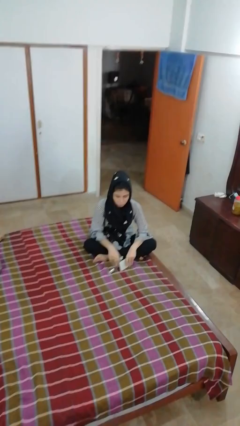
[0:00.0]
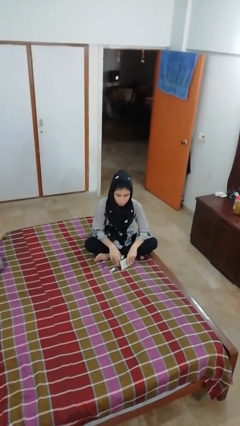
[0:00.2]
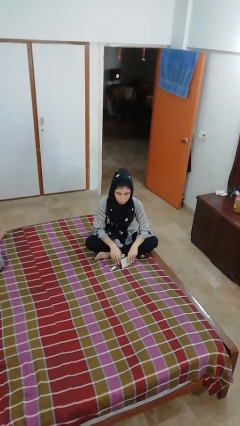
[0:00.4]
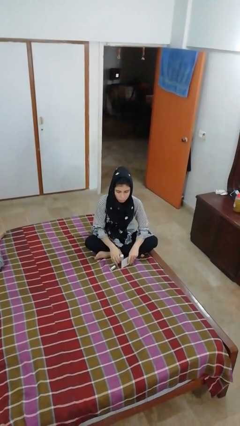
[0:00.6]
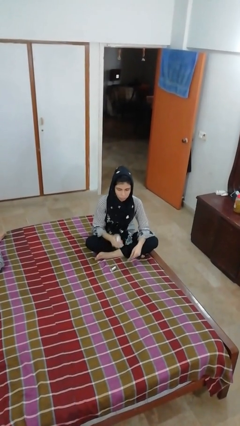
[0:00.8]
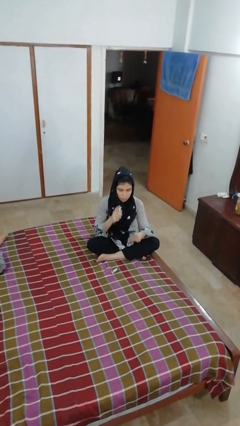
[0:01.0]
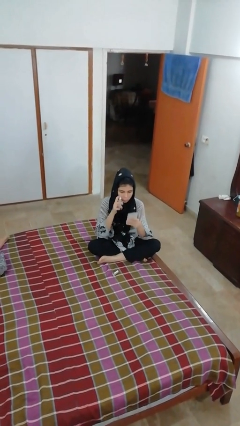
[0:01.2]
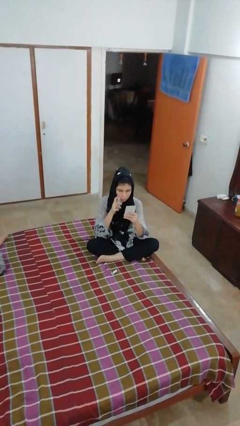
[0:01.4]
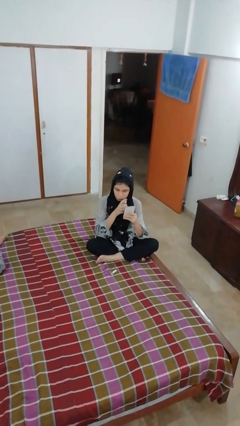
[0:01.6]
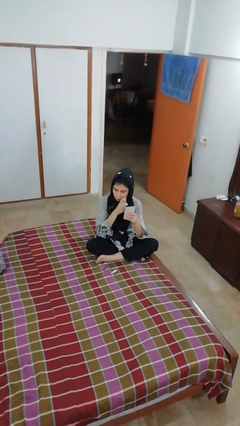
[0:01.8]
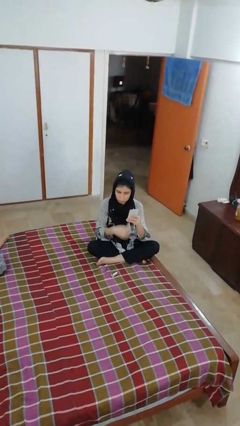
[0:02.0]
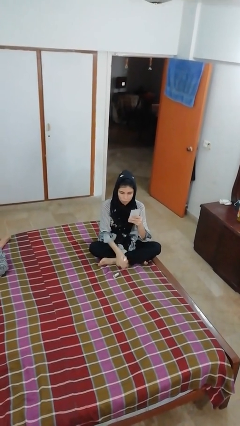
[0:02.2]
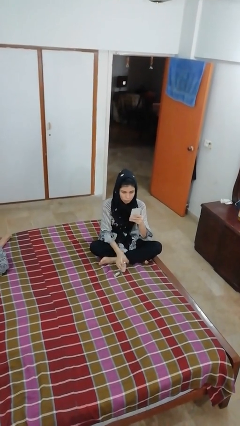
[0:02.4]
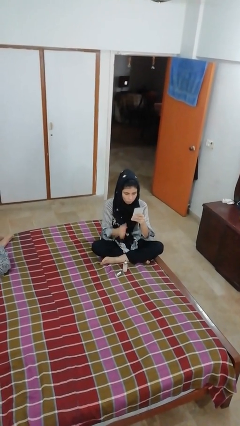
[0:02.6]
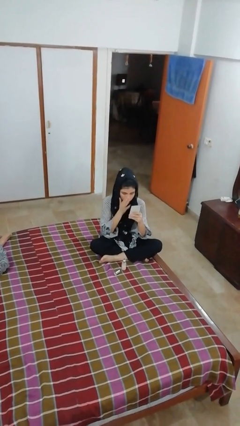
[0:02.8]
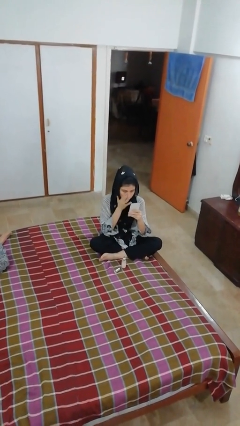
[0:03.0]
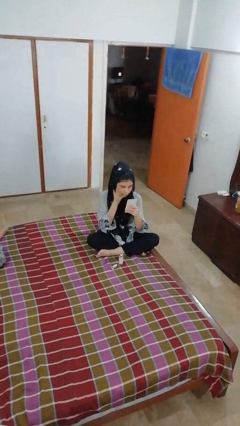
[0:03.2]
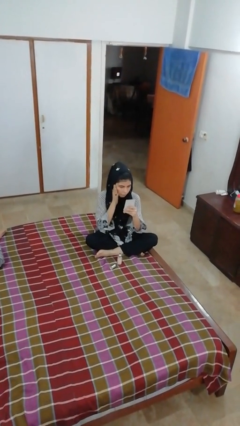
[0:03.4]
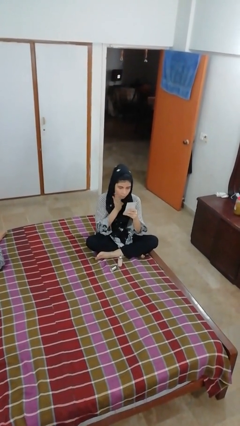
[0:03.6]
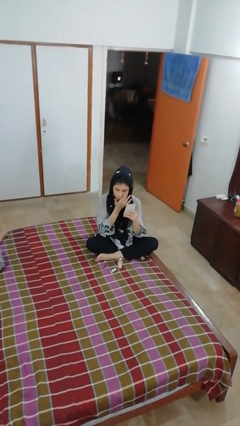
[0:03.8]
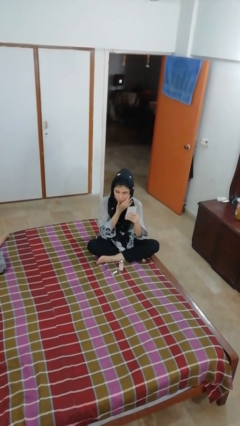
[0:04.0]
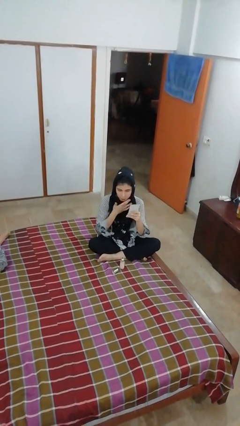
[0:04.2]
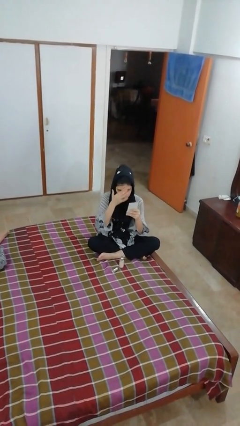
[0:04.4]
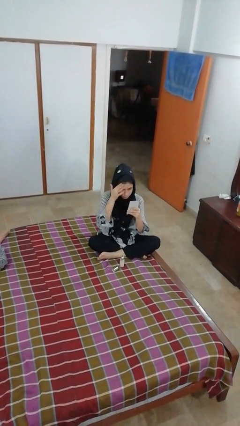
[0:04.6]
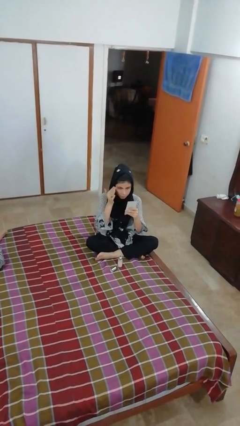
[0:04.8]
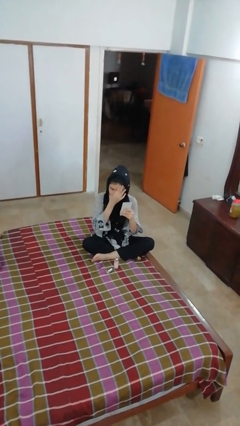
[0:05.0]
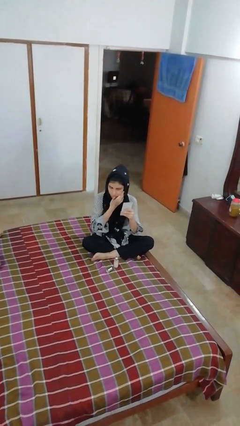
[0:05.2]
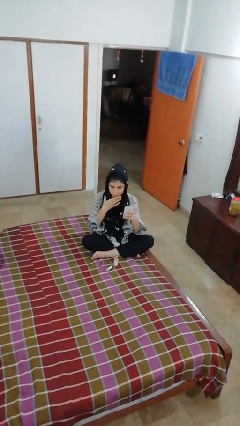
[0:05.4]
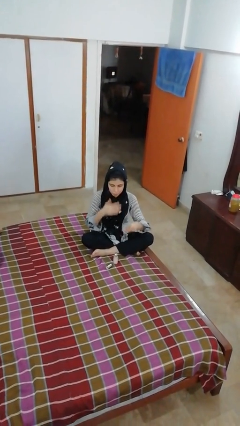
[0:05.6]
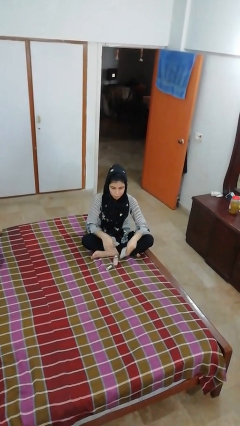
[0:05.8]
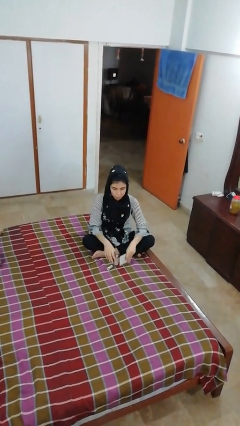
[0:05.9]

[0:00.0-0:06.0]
person applies foundation makeup

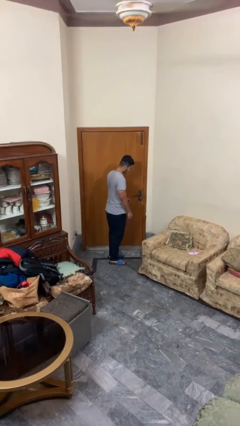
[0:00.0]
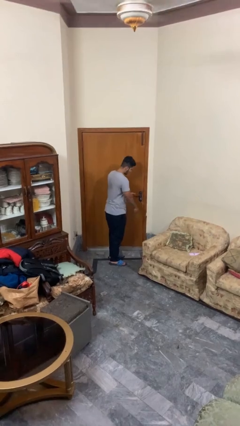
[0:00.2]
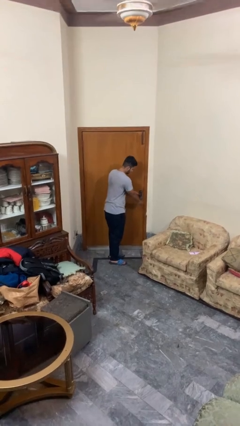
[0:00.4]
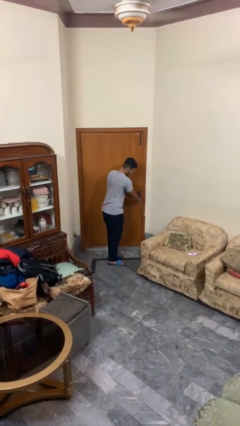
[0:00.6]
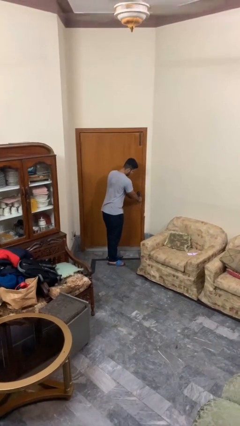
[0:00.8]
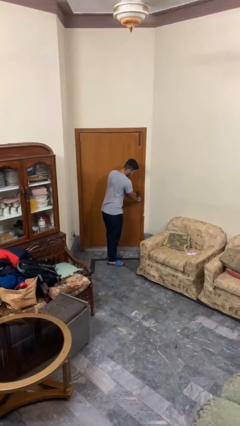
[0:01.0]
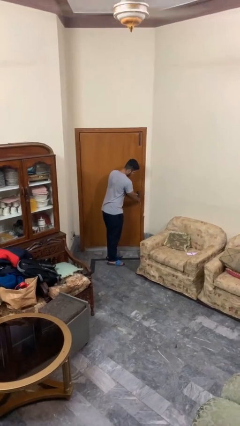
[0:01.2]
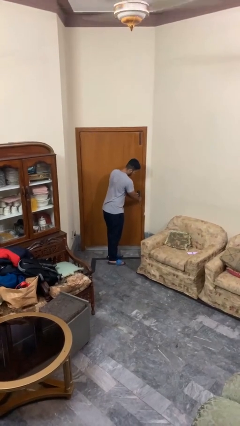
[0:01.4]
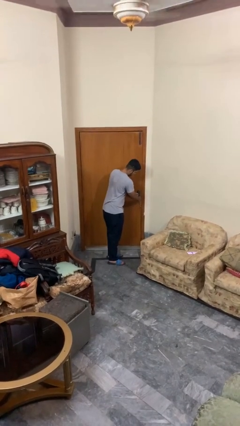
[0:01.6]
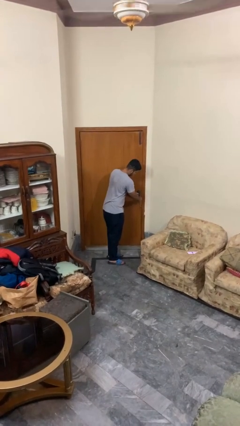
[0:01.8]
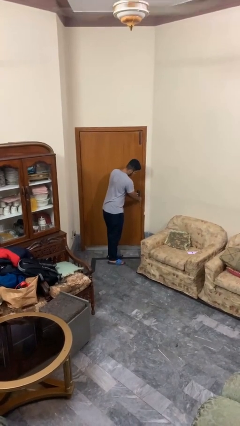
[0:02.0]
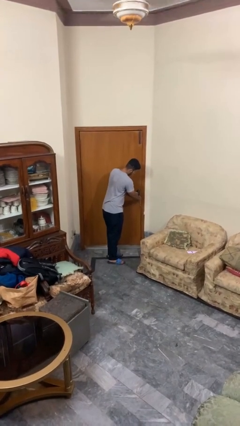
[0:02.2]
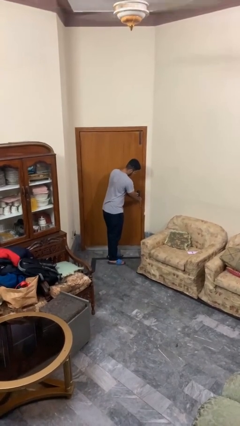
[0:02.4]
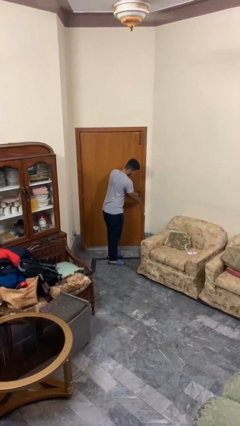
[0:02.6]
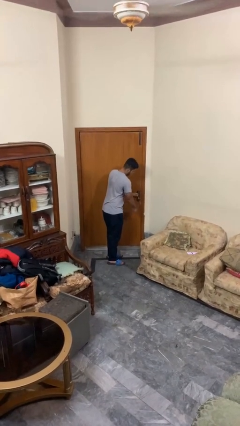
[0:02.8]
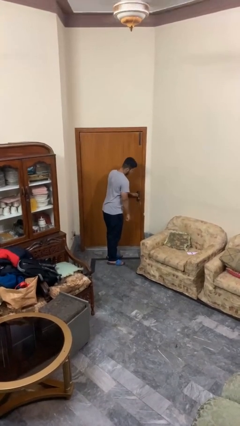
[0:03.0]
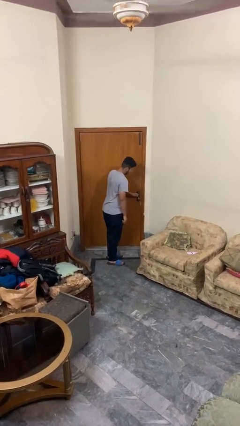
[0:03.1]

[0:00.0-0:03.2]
person unlocks door with keys

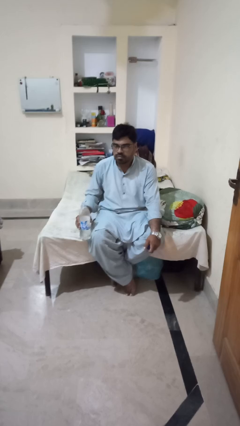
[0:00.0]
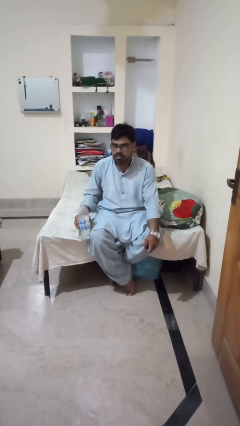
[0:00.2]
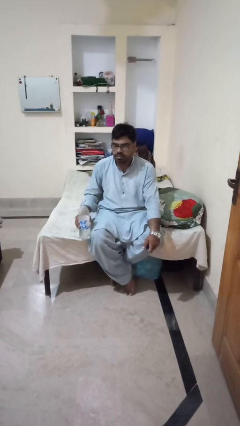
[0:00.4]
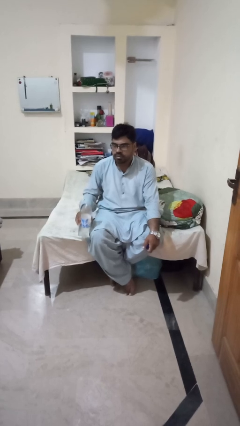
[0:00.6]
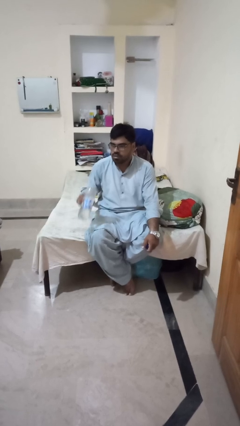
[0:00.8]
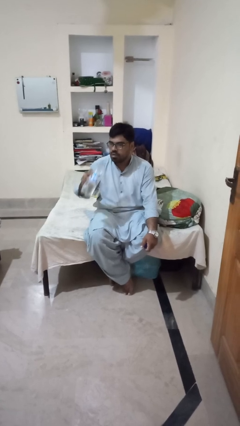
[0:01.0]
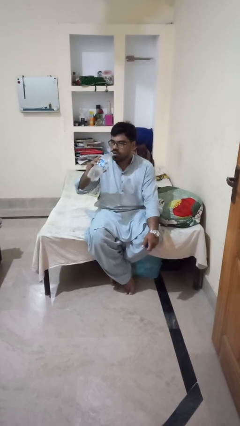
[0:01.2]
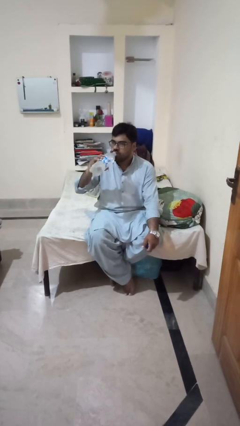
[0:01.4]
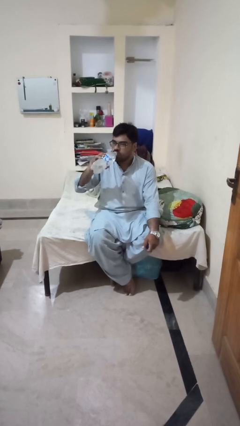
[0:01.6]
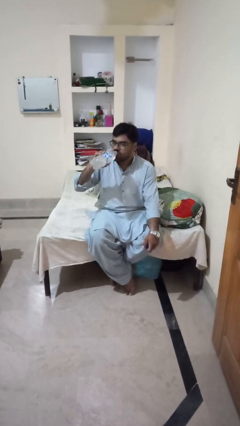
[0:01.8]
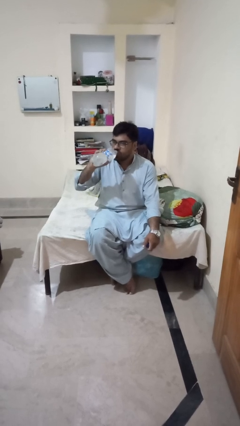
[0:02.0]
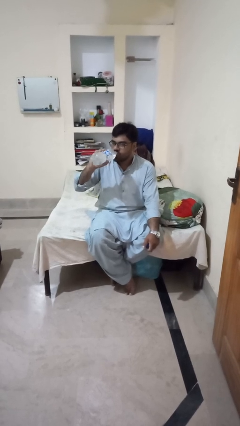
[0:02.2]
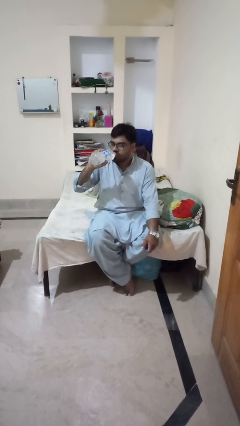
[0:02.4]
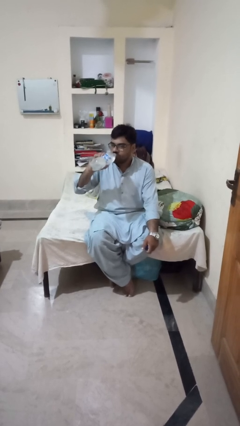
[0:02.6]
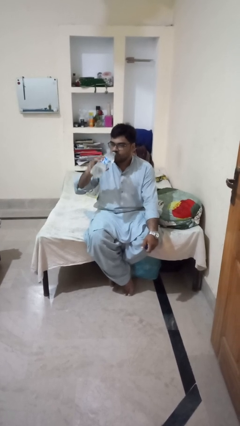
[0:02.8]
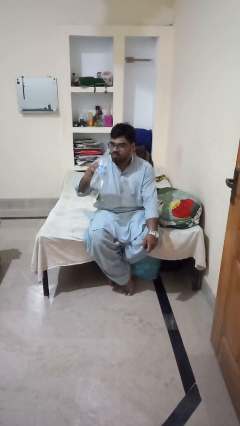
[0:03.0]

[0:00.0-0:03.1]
person drinks from bottle

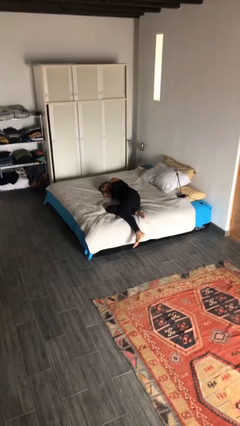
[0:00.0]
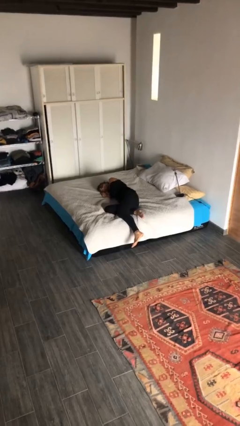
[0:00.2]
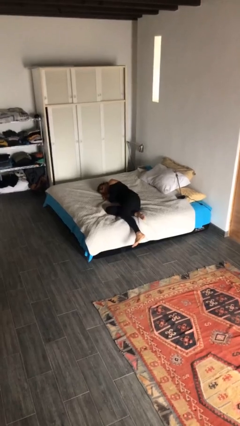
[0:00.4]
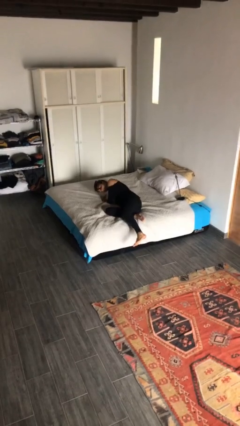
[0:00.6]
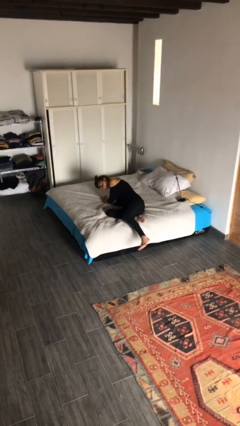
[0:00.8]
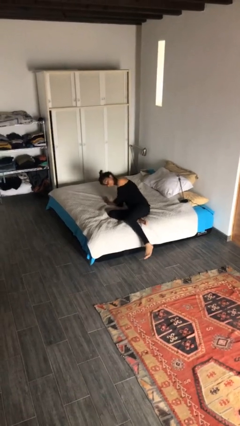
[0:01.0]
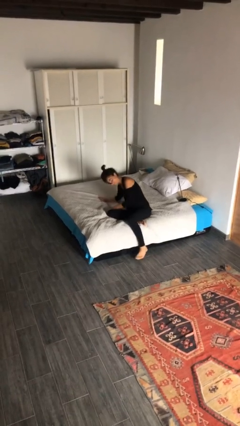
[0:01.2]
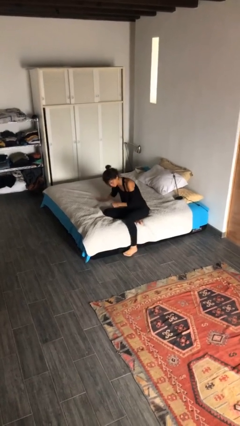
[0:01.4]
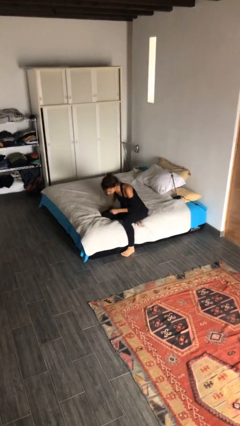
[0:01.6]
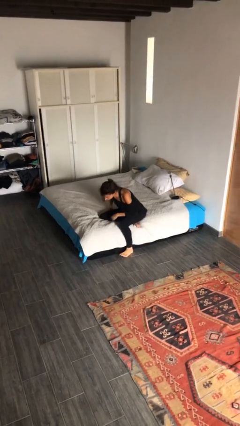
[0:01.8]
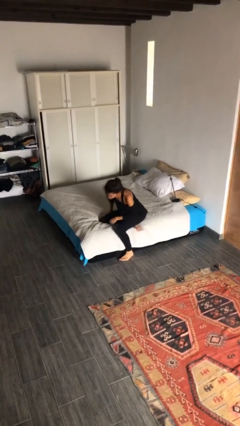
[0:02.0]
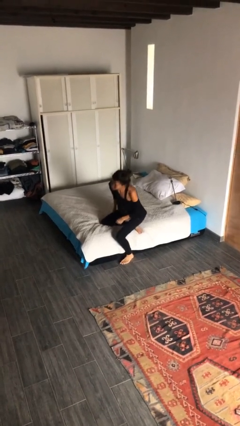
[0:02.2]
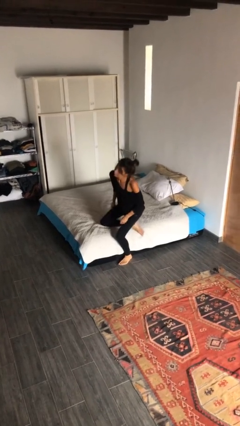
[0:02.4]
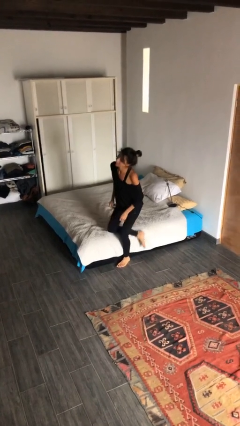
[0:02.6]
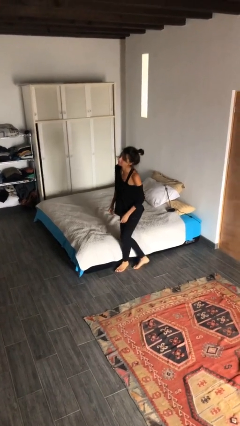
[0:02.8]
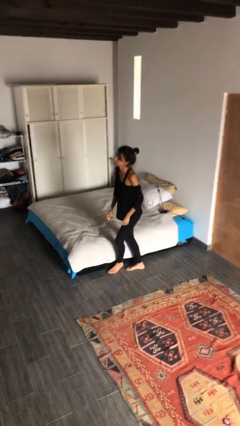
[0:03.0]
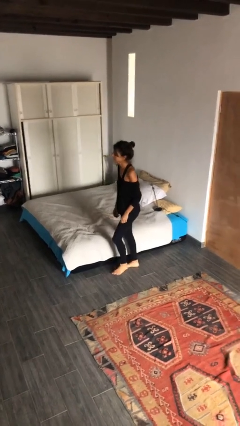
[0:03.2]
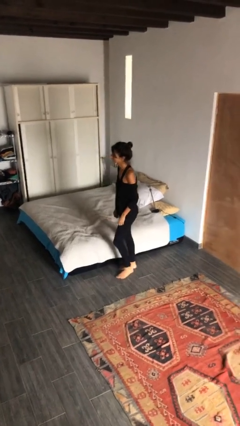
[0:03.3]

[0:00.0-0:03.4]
person stands up

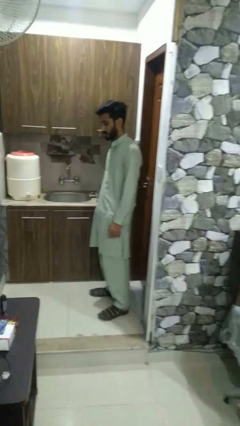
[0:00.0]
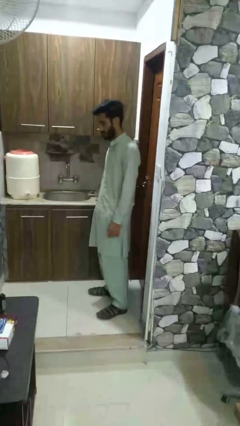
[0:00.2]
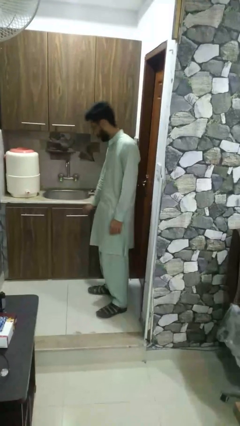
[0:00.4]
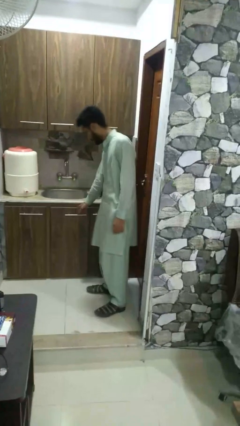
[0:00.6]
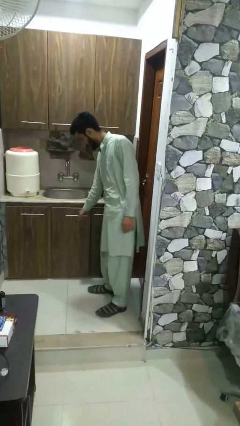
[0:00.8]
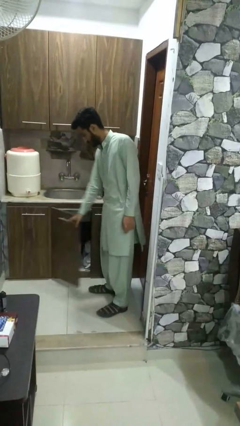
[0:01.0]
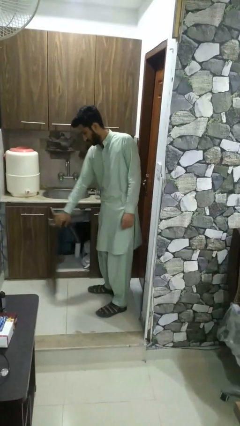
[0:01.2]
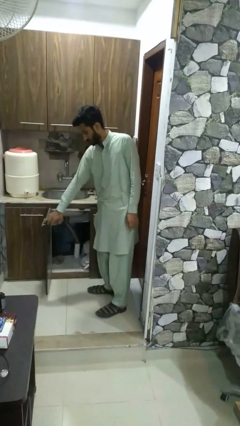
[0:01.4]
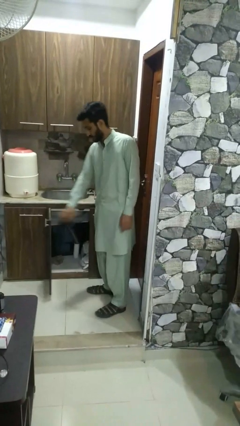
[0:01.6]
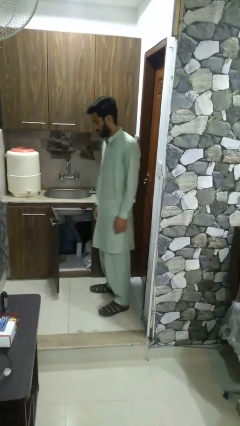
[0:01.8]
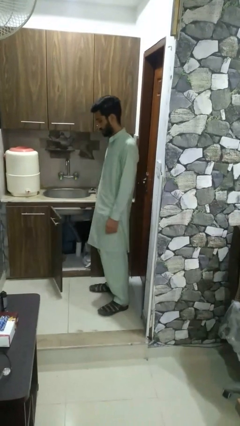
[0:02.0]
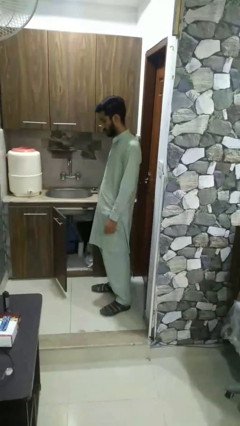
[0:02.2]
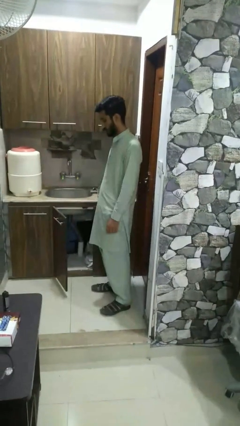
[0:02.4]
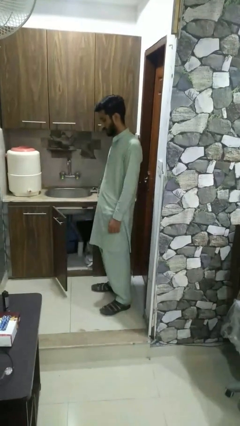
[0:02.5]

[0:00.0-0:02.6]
person opens closet door
